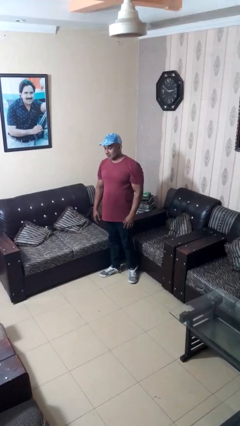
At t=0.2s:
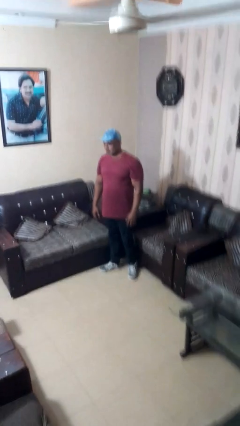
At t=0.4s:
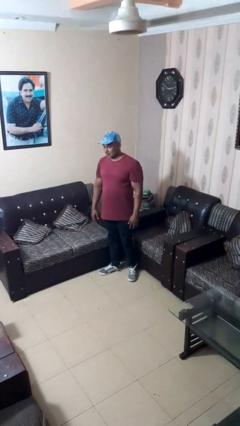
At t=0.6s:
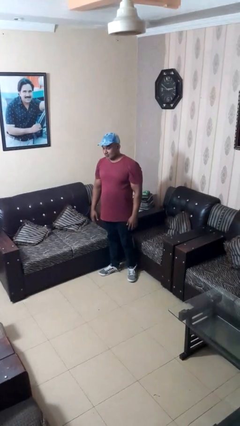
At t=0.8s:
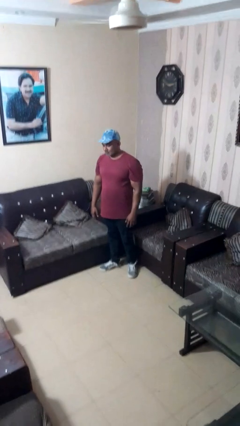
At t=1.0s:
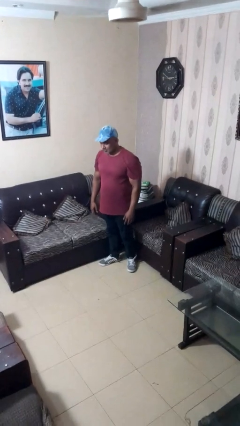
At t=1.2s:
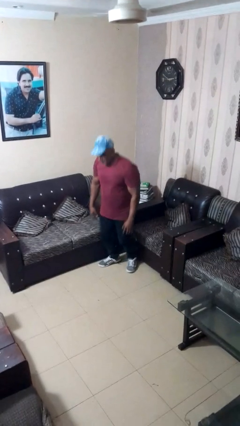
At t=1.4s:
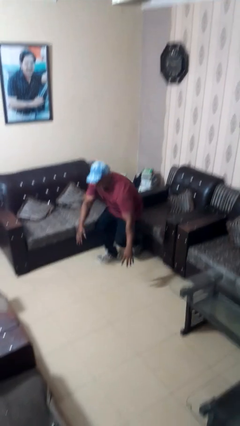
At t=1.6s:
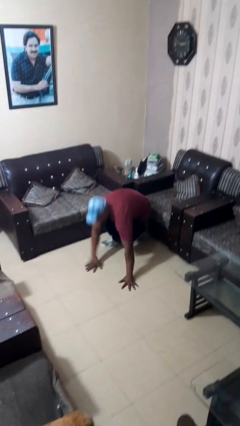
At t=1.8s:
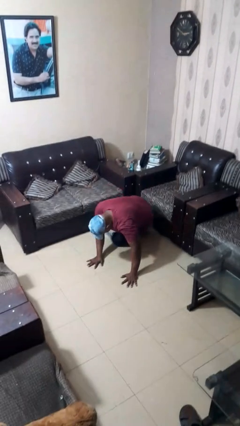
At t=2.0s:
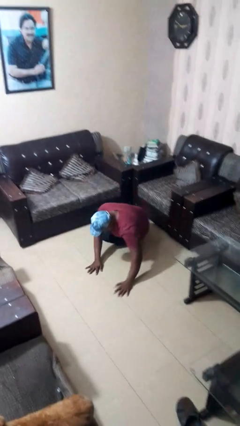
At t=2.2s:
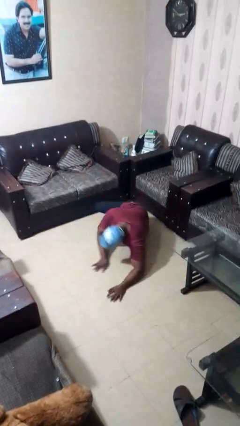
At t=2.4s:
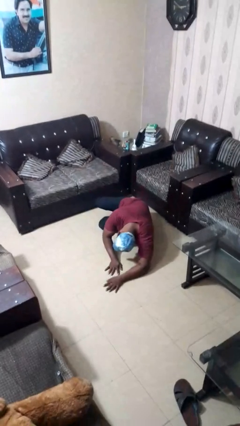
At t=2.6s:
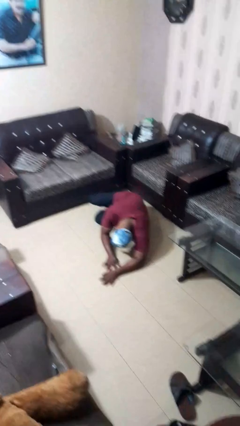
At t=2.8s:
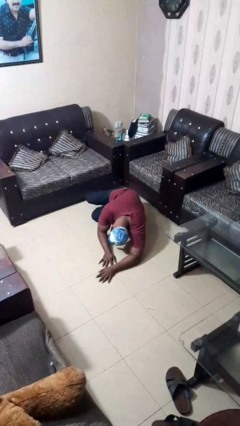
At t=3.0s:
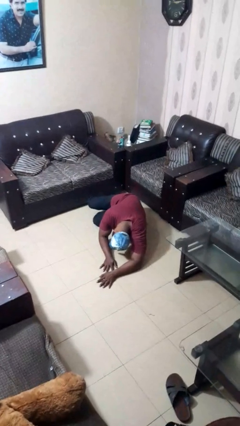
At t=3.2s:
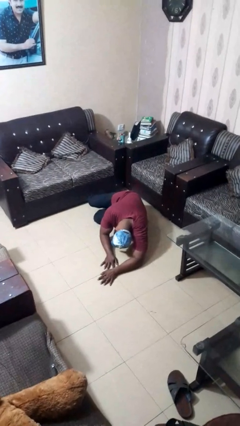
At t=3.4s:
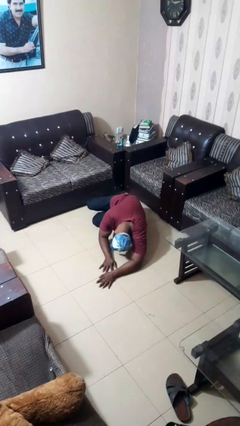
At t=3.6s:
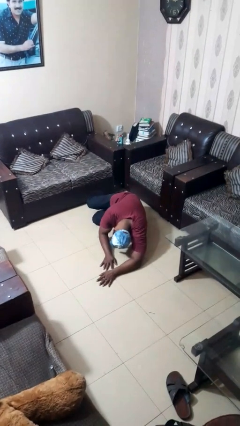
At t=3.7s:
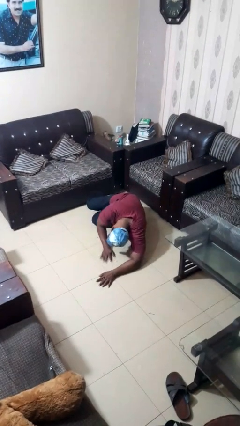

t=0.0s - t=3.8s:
person falls while standing

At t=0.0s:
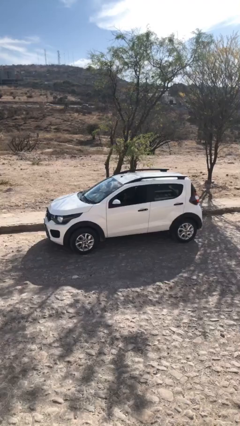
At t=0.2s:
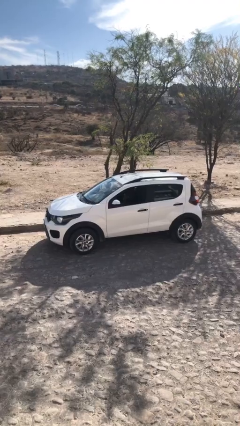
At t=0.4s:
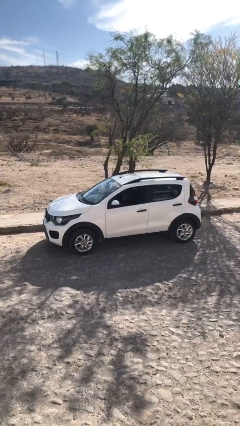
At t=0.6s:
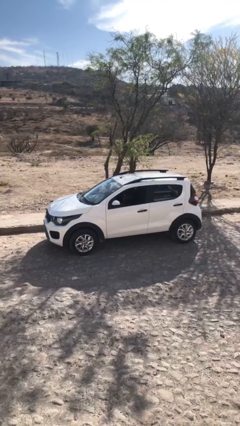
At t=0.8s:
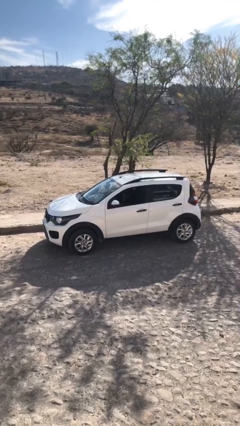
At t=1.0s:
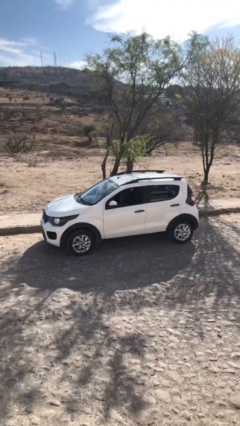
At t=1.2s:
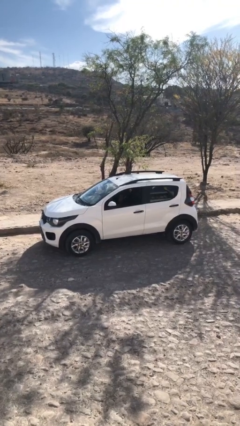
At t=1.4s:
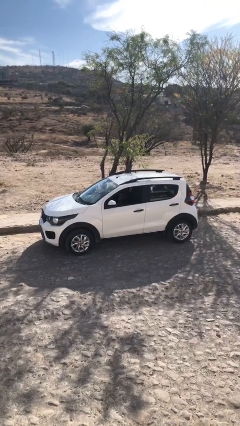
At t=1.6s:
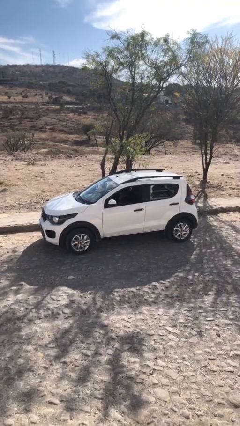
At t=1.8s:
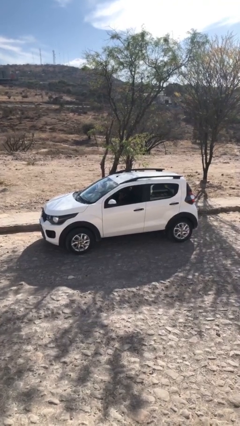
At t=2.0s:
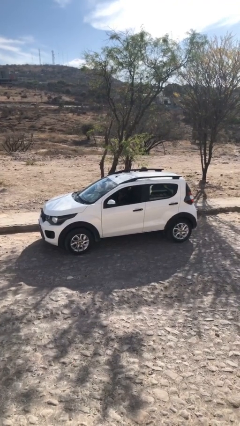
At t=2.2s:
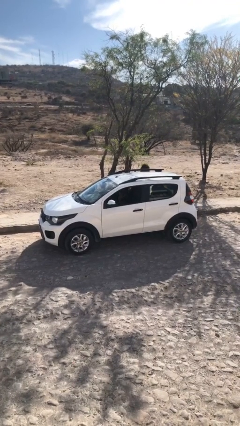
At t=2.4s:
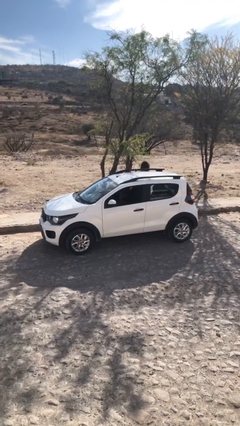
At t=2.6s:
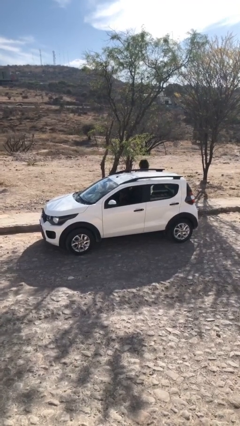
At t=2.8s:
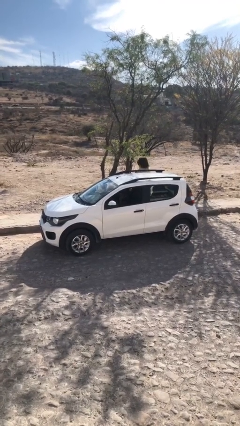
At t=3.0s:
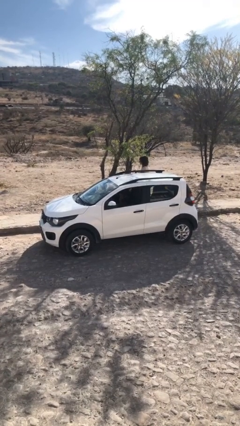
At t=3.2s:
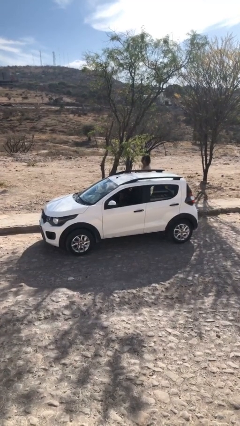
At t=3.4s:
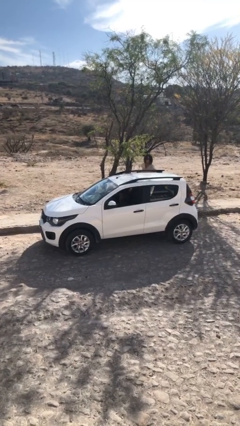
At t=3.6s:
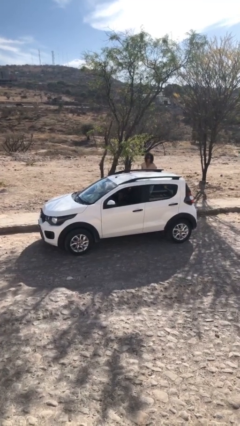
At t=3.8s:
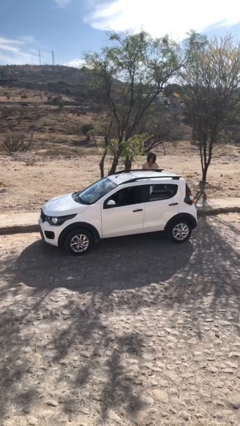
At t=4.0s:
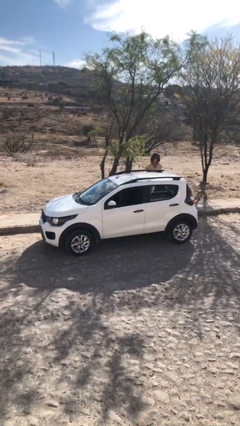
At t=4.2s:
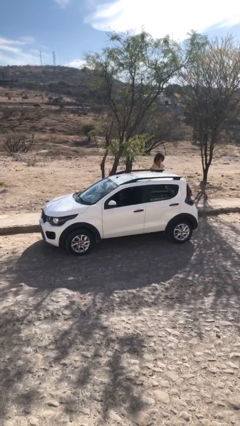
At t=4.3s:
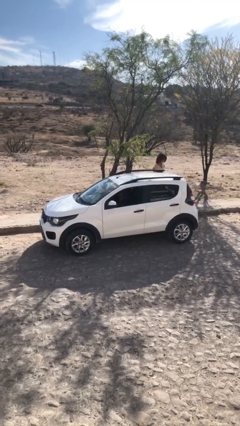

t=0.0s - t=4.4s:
car drops off person

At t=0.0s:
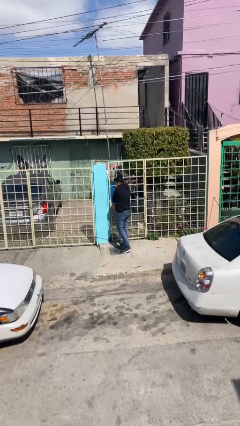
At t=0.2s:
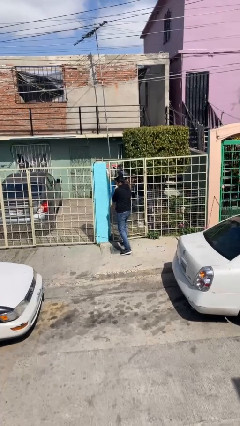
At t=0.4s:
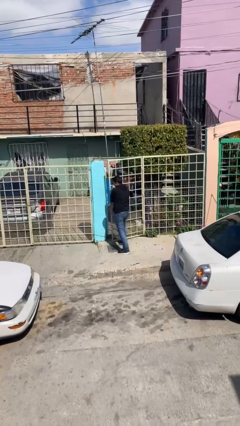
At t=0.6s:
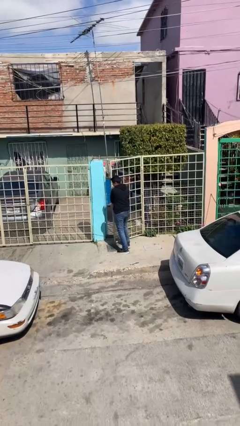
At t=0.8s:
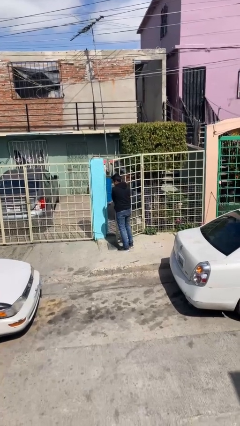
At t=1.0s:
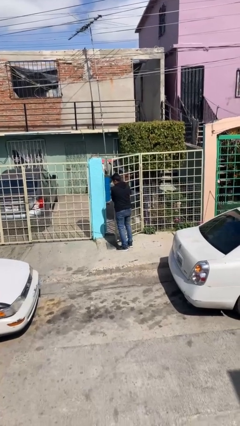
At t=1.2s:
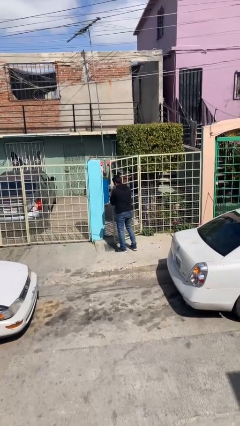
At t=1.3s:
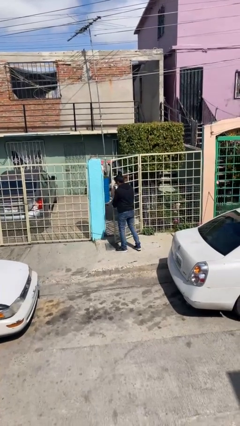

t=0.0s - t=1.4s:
person opens facility door

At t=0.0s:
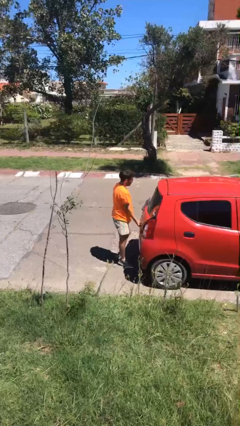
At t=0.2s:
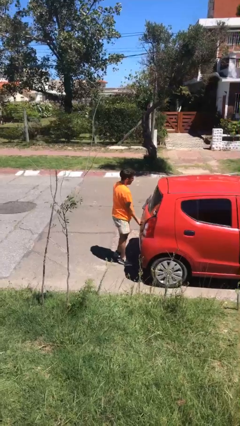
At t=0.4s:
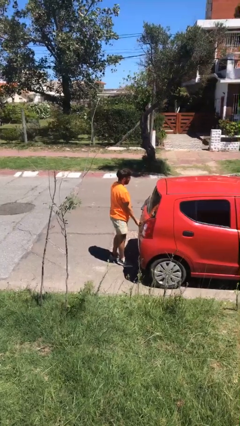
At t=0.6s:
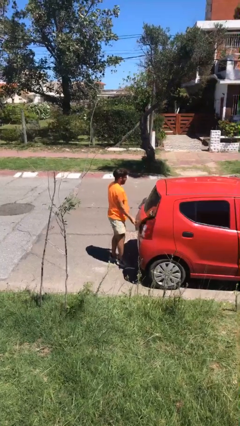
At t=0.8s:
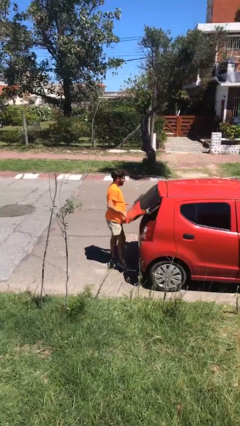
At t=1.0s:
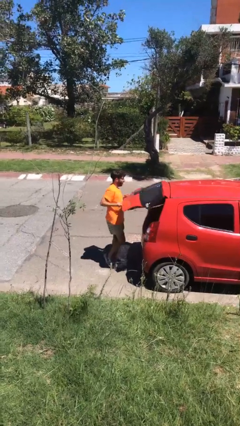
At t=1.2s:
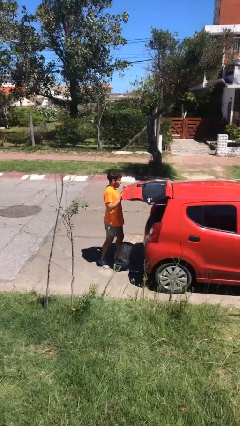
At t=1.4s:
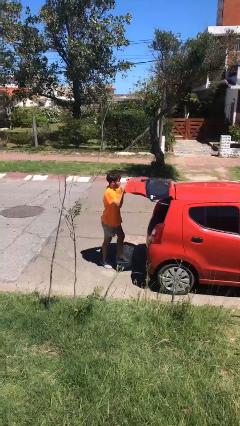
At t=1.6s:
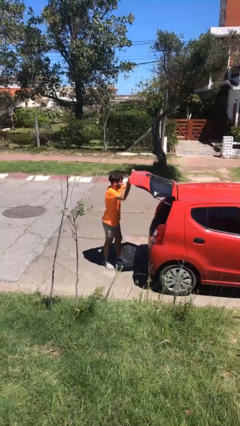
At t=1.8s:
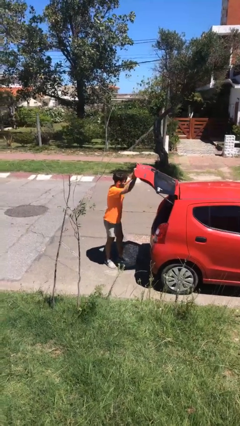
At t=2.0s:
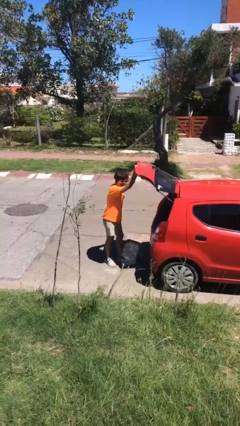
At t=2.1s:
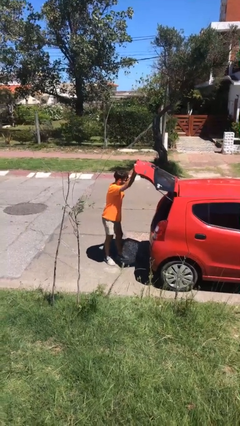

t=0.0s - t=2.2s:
person opens car trunk

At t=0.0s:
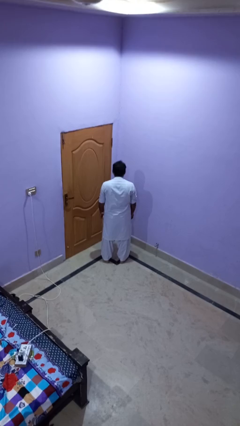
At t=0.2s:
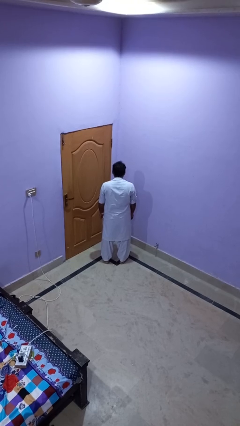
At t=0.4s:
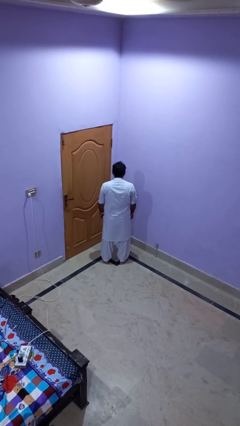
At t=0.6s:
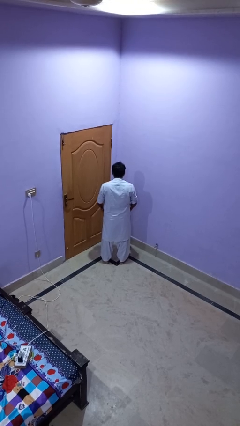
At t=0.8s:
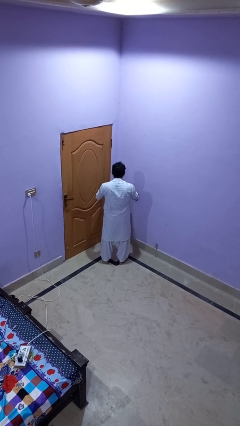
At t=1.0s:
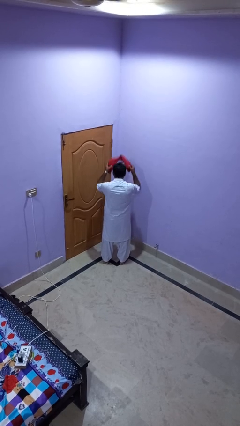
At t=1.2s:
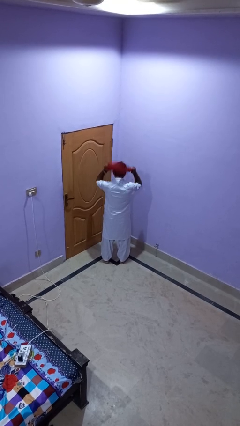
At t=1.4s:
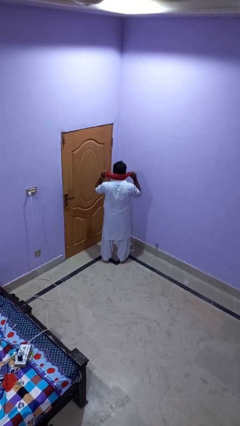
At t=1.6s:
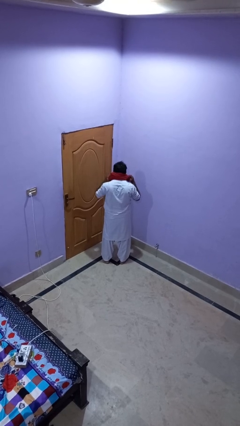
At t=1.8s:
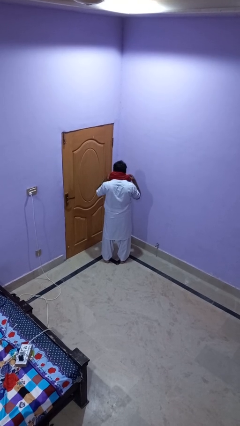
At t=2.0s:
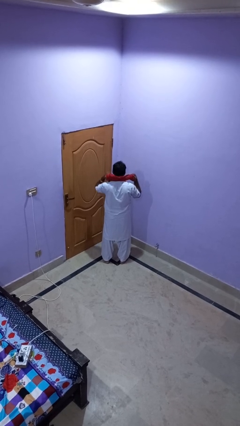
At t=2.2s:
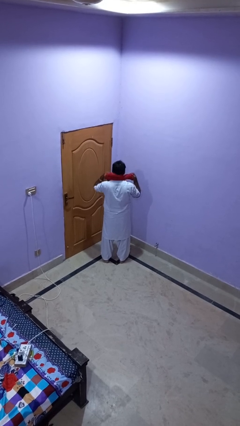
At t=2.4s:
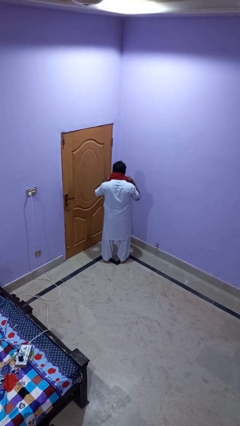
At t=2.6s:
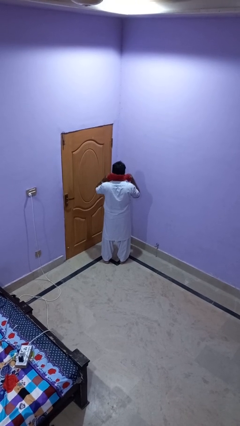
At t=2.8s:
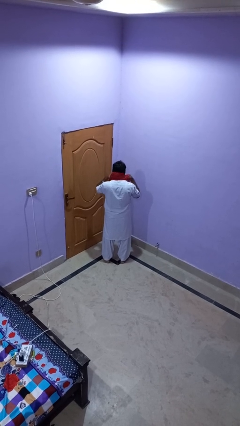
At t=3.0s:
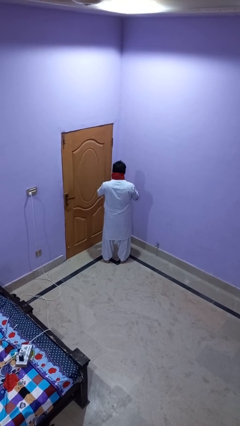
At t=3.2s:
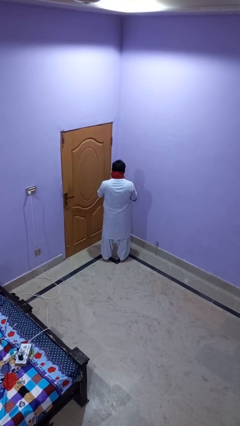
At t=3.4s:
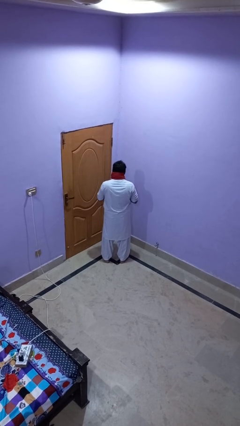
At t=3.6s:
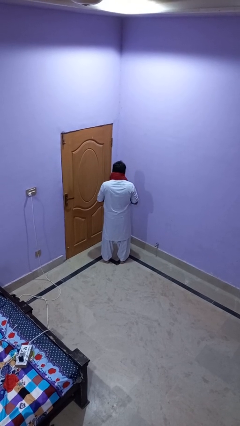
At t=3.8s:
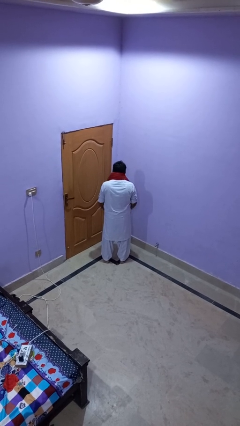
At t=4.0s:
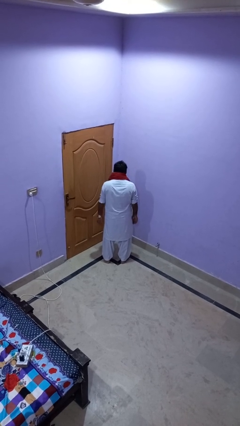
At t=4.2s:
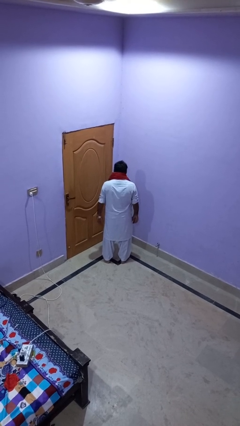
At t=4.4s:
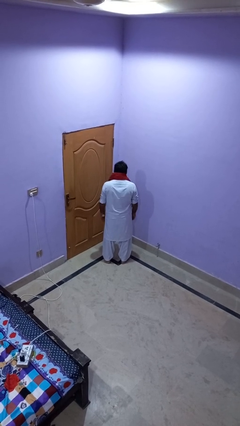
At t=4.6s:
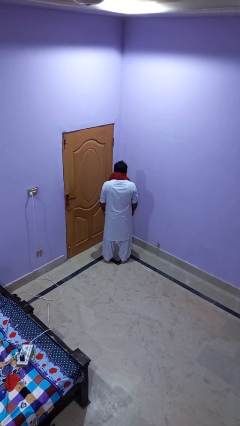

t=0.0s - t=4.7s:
person puts on scarf

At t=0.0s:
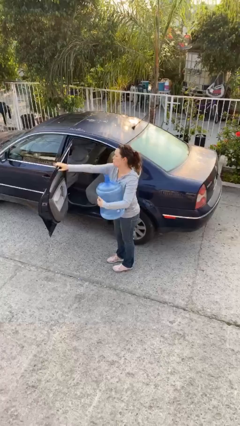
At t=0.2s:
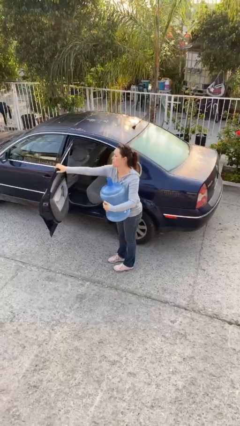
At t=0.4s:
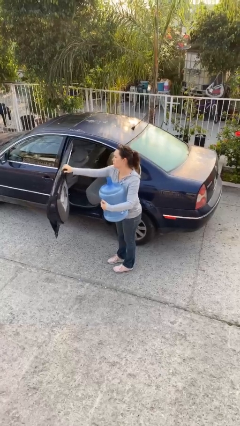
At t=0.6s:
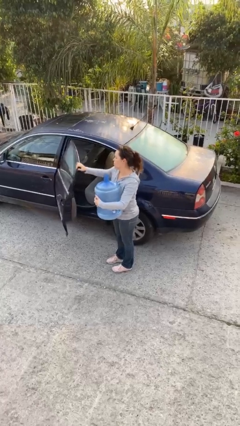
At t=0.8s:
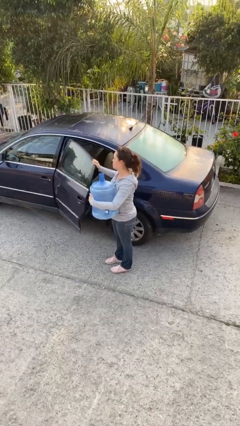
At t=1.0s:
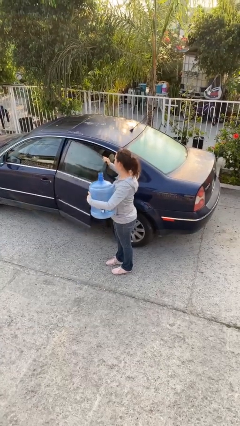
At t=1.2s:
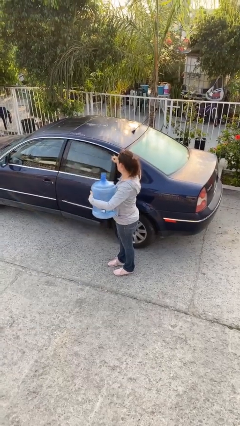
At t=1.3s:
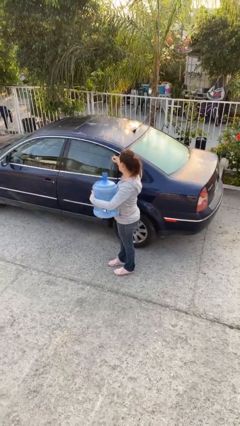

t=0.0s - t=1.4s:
person closes car door
